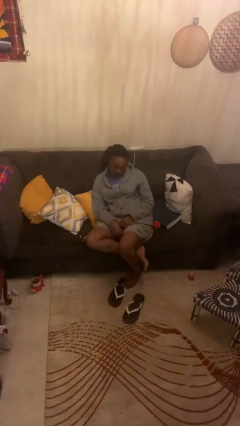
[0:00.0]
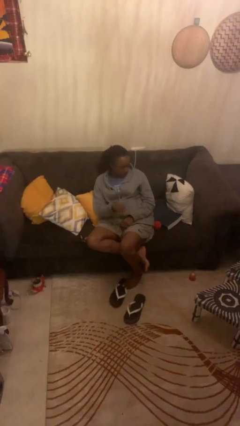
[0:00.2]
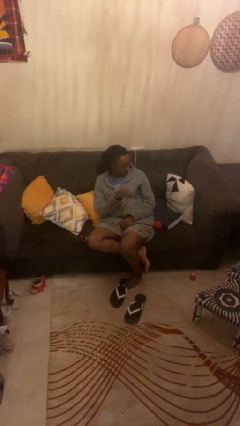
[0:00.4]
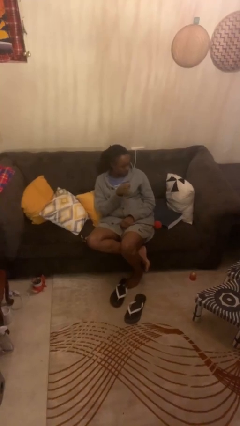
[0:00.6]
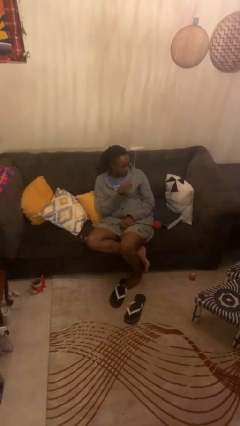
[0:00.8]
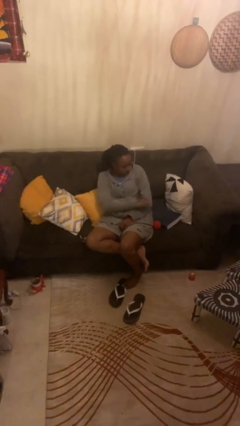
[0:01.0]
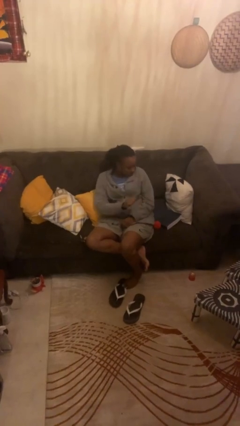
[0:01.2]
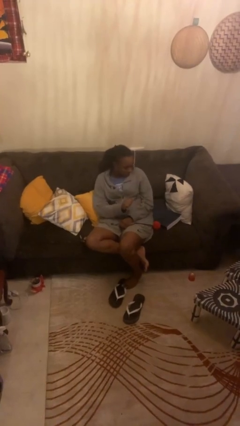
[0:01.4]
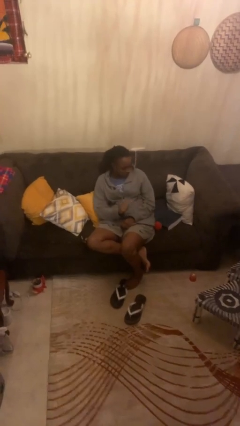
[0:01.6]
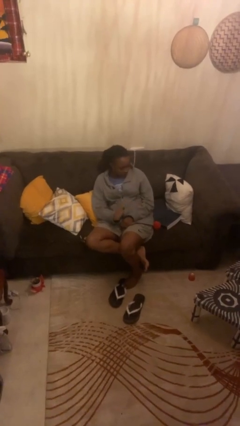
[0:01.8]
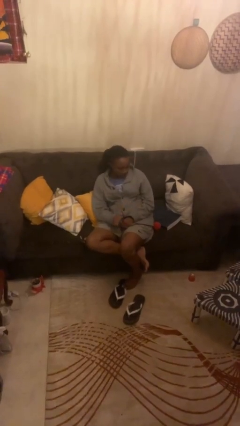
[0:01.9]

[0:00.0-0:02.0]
person swats bug

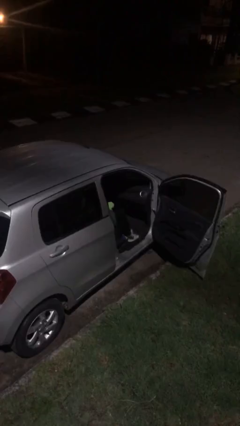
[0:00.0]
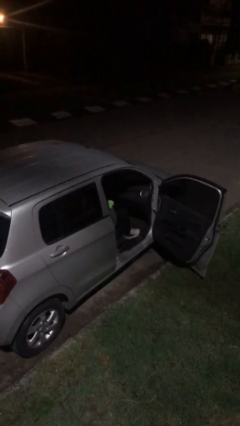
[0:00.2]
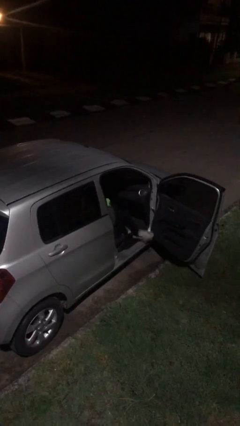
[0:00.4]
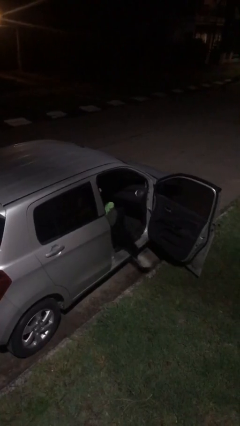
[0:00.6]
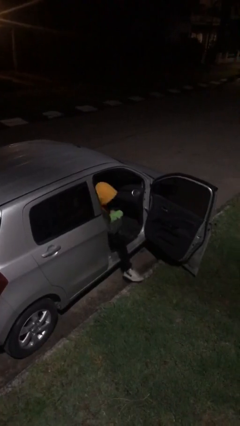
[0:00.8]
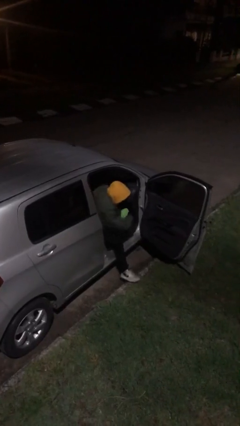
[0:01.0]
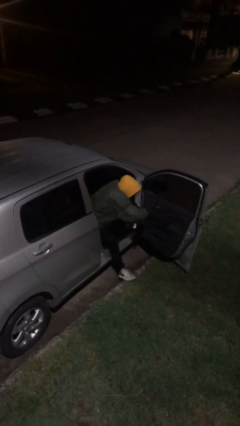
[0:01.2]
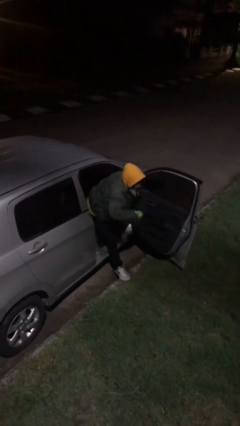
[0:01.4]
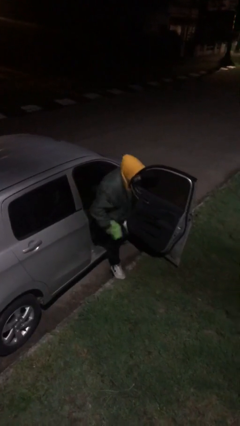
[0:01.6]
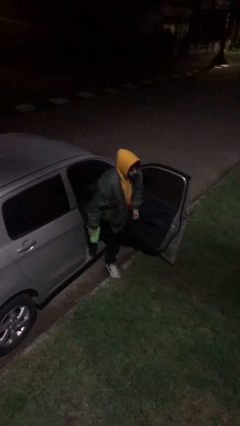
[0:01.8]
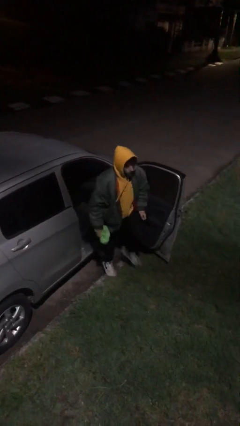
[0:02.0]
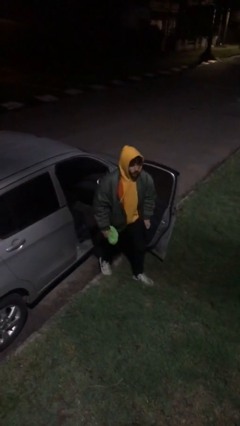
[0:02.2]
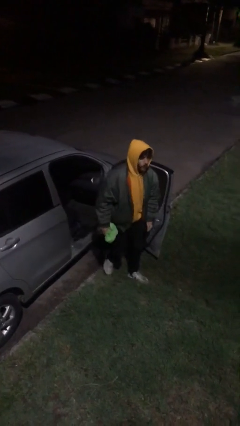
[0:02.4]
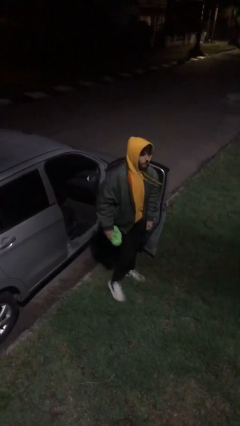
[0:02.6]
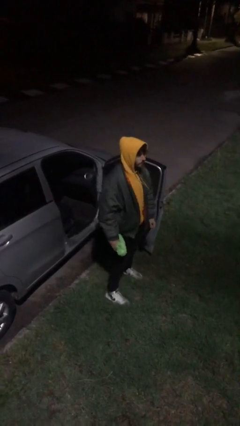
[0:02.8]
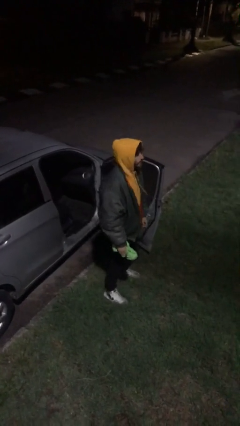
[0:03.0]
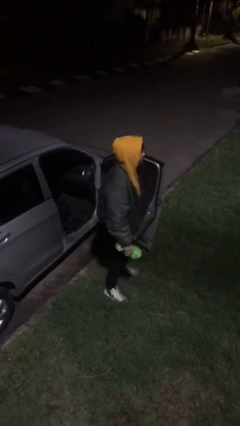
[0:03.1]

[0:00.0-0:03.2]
person exits car

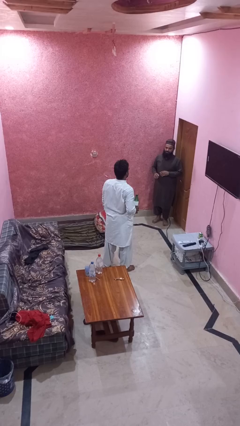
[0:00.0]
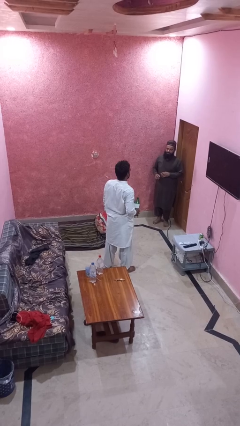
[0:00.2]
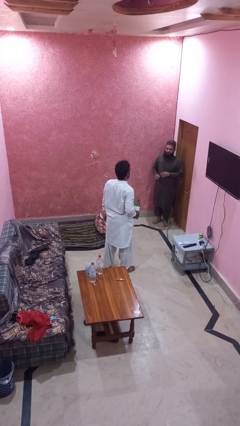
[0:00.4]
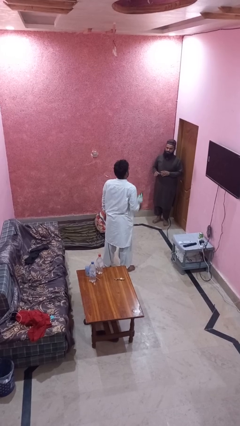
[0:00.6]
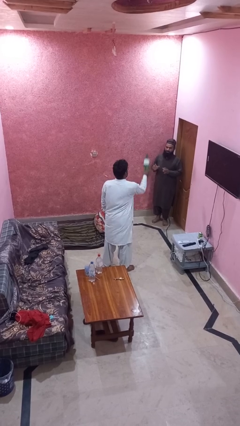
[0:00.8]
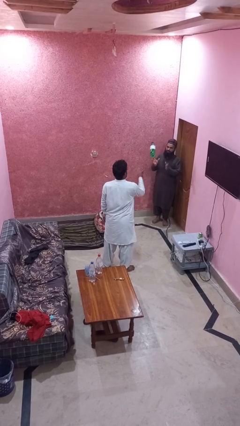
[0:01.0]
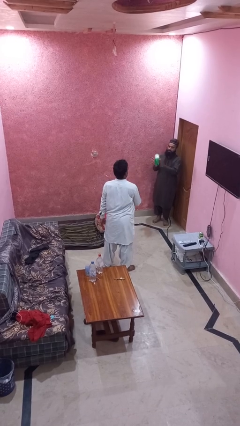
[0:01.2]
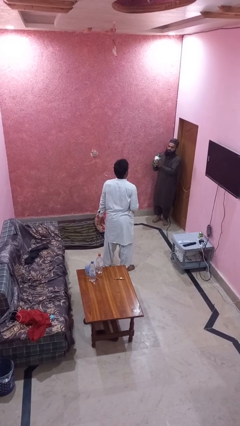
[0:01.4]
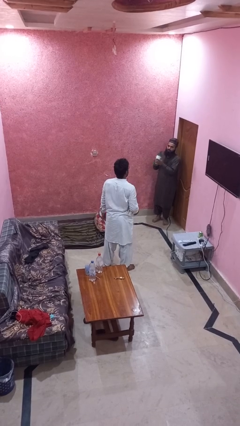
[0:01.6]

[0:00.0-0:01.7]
person throws object to person

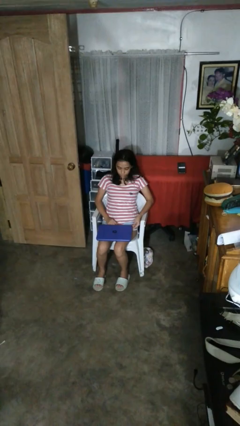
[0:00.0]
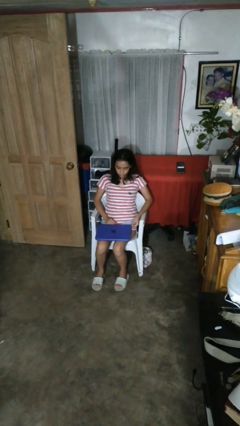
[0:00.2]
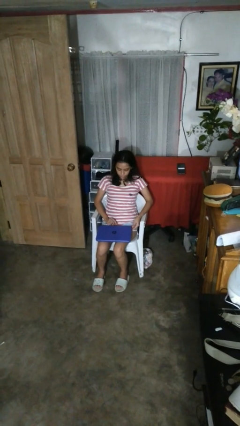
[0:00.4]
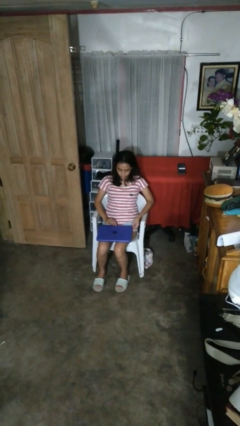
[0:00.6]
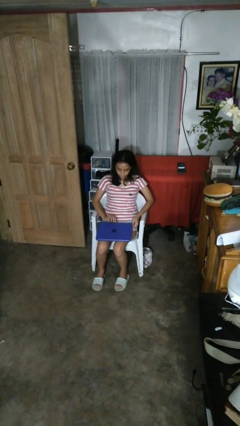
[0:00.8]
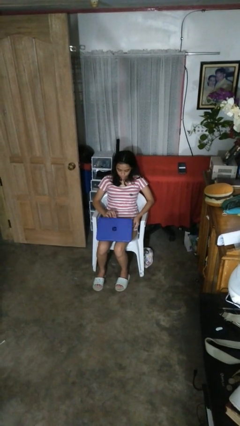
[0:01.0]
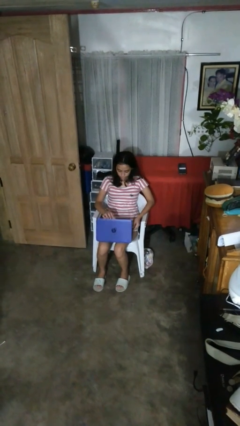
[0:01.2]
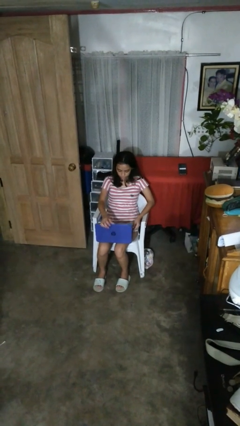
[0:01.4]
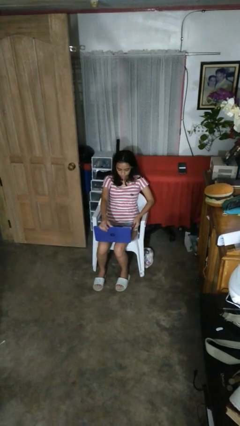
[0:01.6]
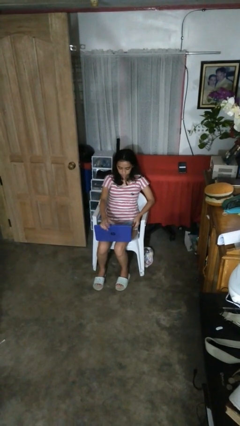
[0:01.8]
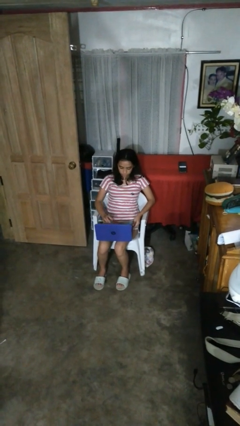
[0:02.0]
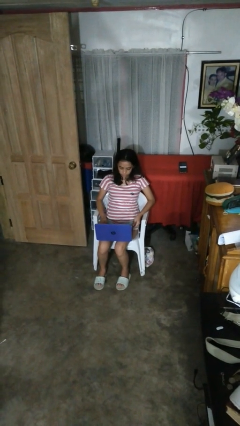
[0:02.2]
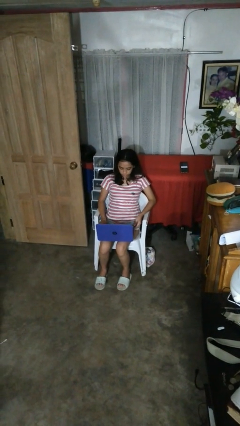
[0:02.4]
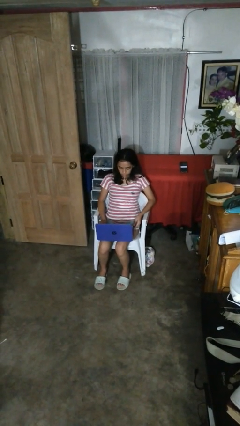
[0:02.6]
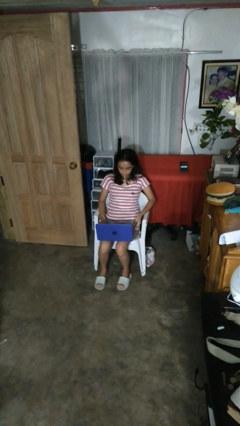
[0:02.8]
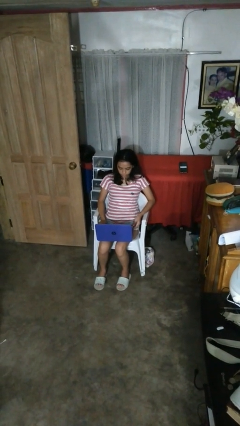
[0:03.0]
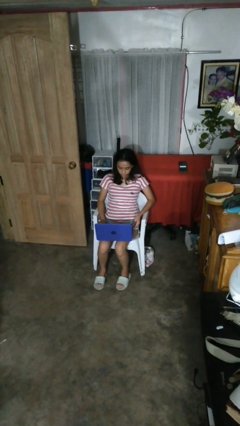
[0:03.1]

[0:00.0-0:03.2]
person opens laptop

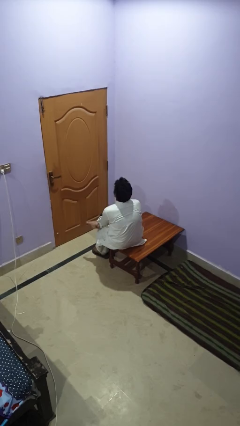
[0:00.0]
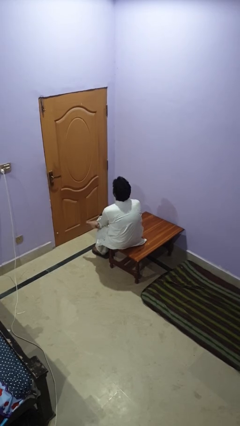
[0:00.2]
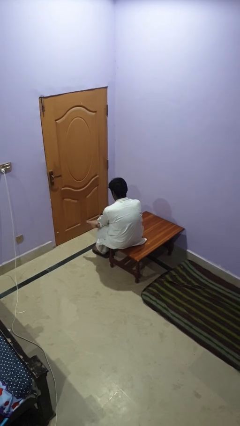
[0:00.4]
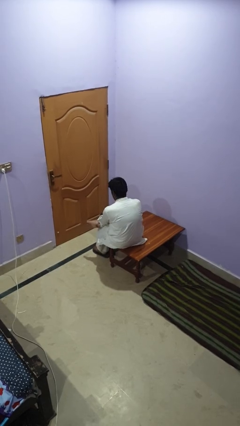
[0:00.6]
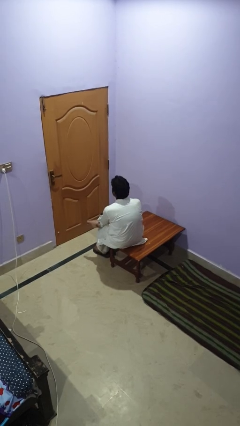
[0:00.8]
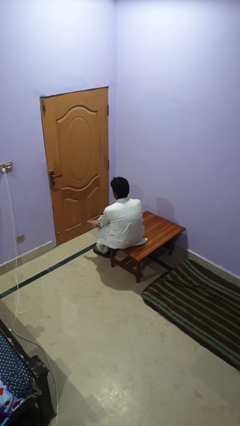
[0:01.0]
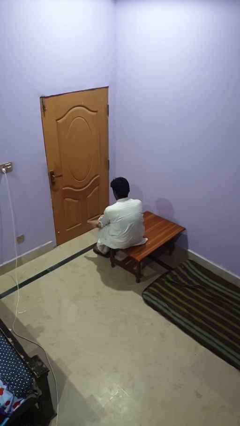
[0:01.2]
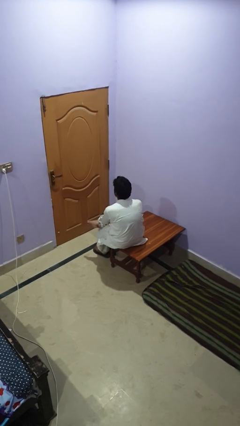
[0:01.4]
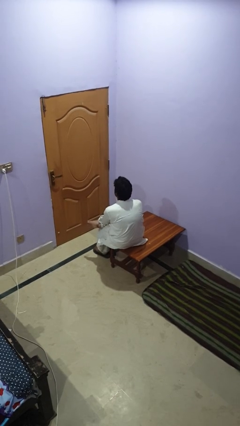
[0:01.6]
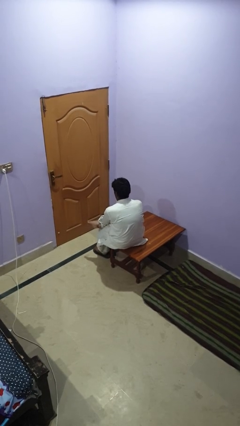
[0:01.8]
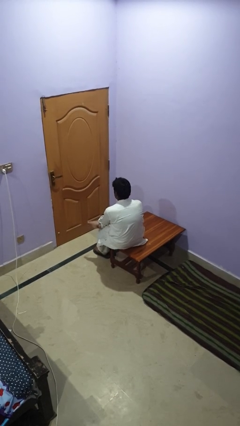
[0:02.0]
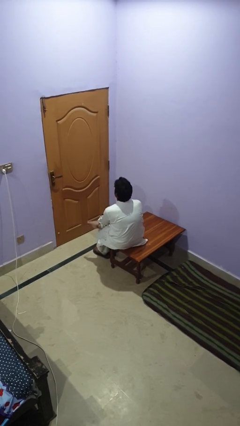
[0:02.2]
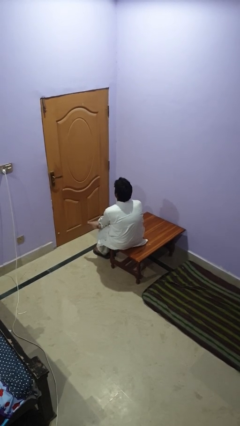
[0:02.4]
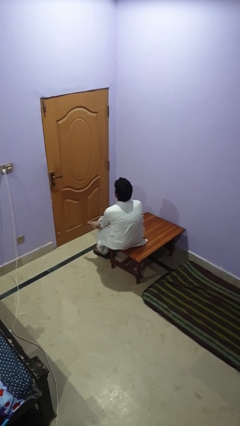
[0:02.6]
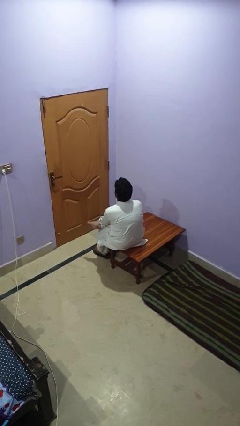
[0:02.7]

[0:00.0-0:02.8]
person nods head

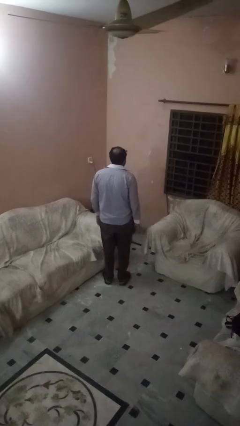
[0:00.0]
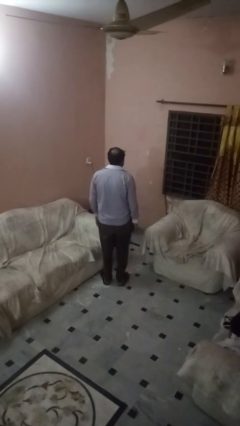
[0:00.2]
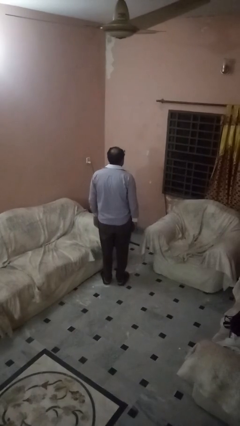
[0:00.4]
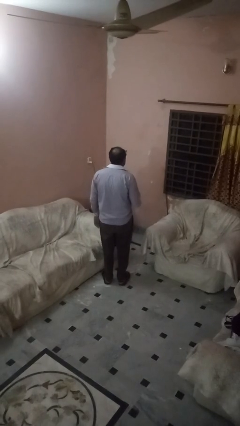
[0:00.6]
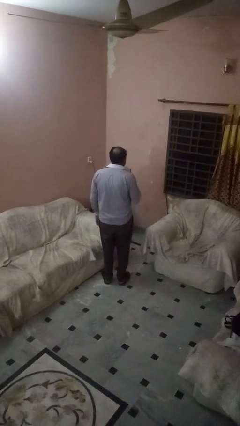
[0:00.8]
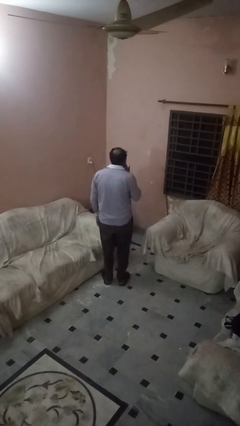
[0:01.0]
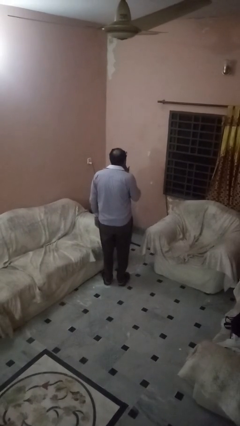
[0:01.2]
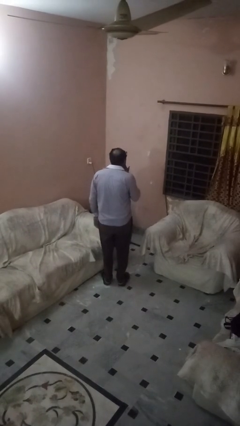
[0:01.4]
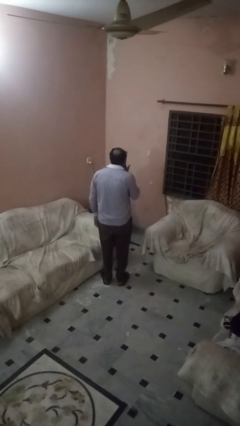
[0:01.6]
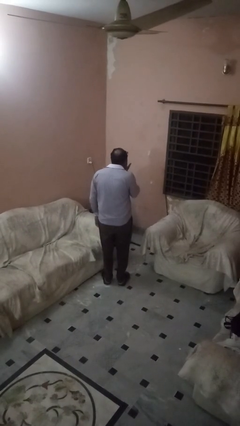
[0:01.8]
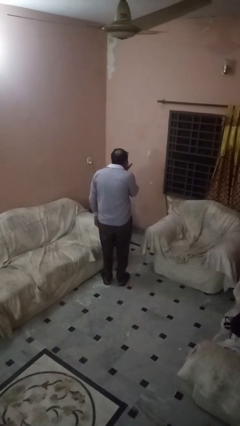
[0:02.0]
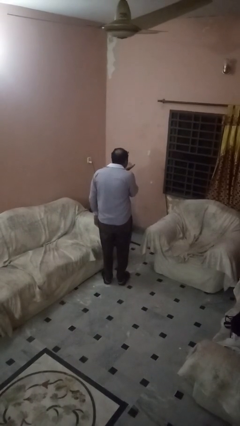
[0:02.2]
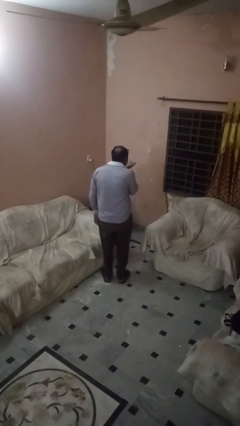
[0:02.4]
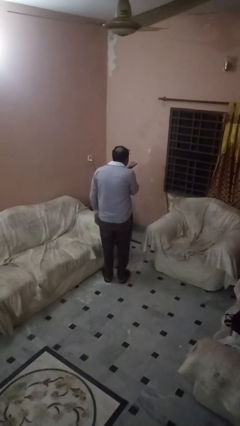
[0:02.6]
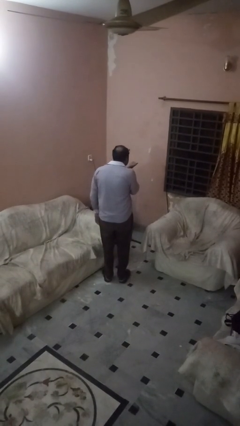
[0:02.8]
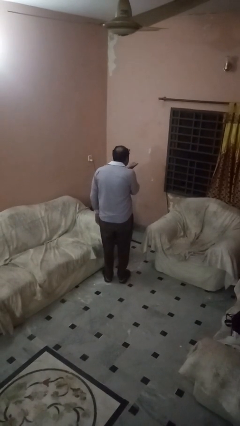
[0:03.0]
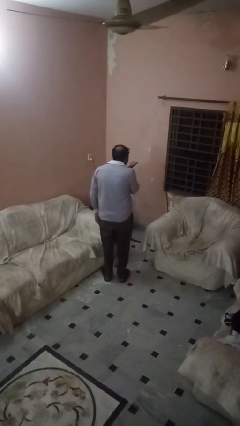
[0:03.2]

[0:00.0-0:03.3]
person gestures blow kiss

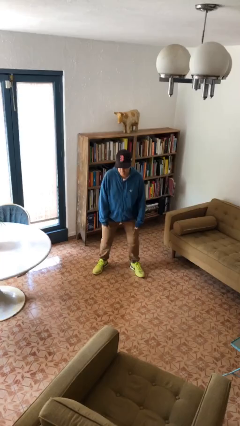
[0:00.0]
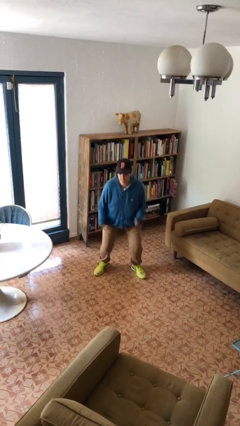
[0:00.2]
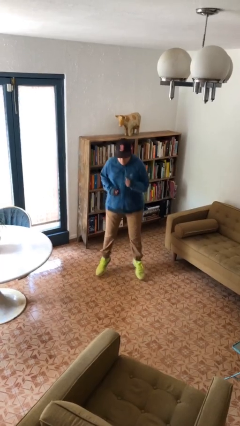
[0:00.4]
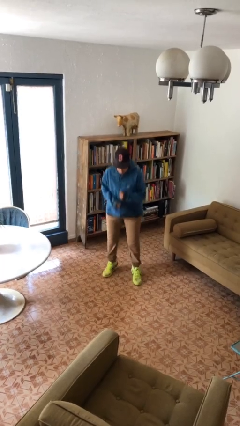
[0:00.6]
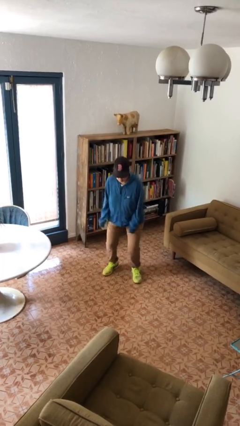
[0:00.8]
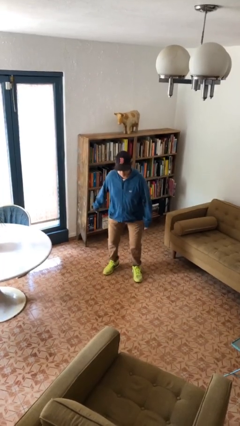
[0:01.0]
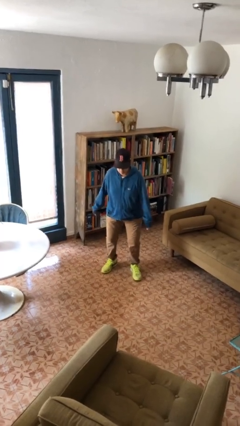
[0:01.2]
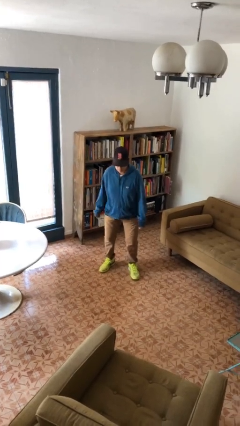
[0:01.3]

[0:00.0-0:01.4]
person jumps
